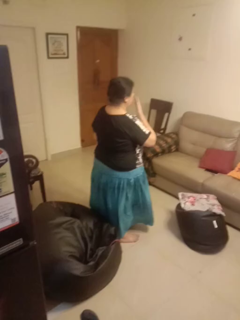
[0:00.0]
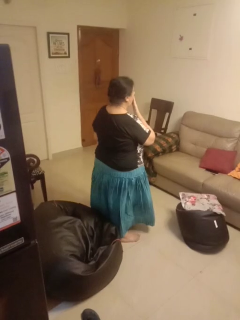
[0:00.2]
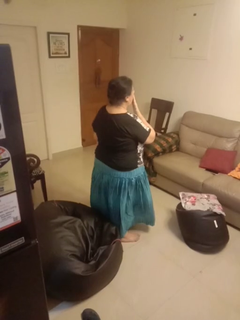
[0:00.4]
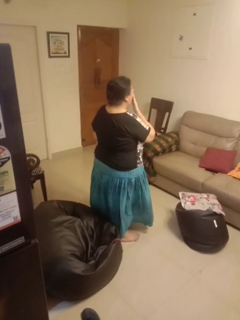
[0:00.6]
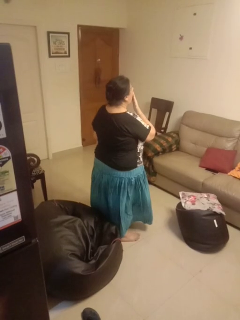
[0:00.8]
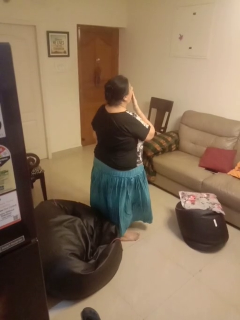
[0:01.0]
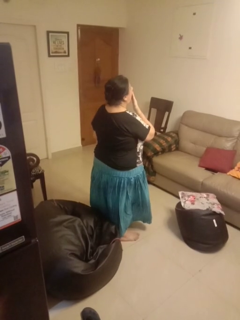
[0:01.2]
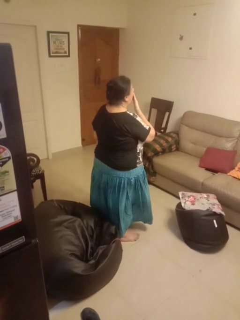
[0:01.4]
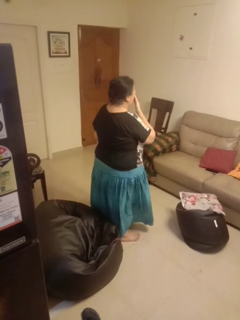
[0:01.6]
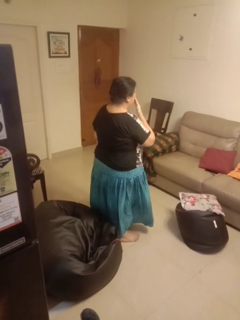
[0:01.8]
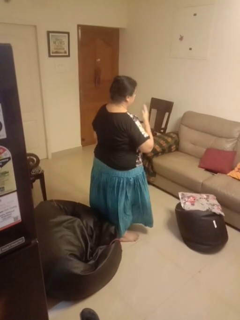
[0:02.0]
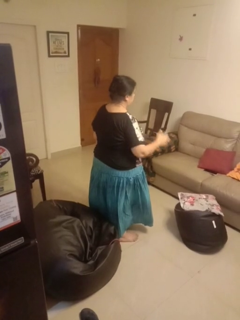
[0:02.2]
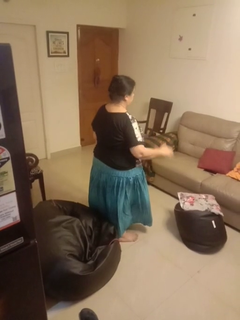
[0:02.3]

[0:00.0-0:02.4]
person yawns

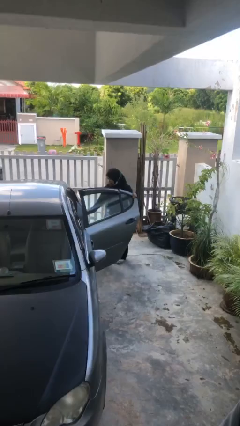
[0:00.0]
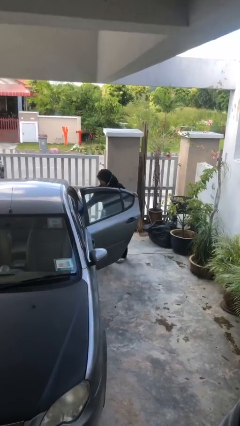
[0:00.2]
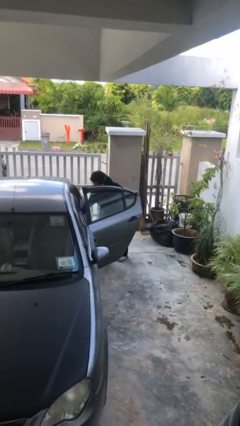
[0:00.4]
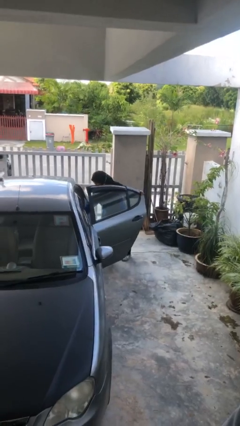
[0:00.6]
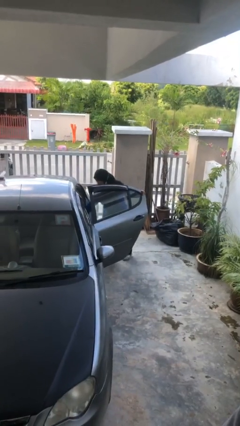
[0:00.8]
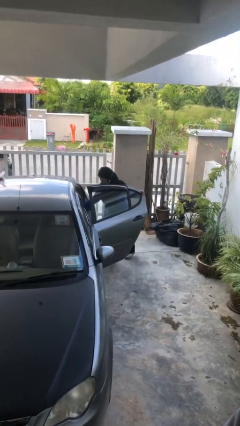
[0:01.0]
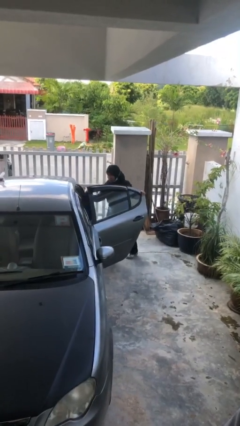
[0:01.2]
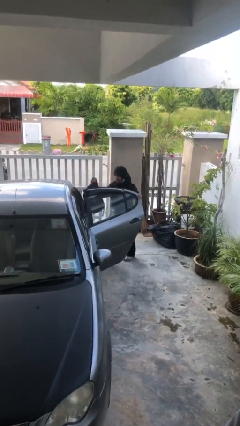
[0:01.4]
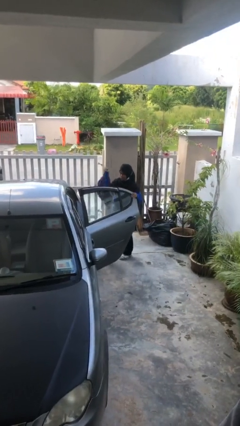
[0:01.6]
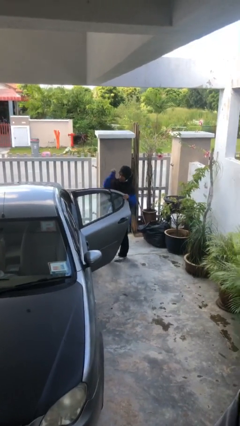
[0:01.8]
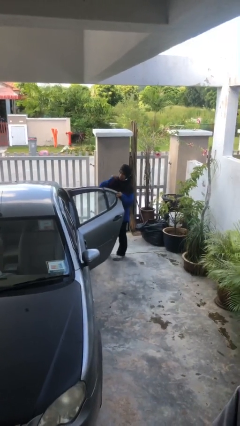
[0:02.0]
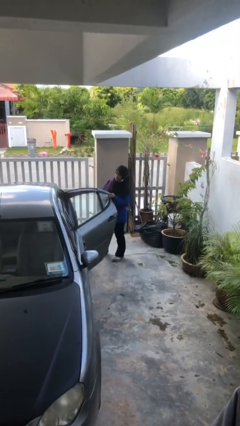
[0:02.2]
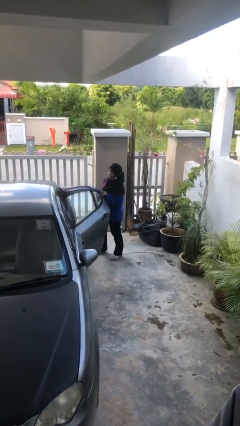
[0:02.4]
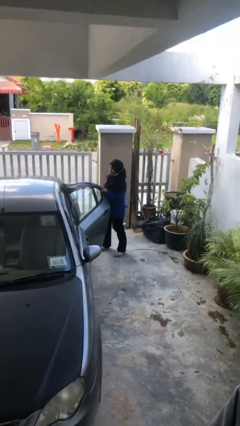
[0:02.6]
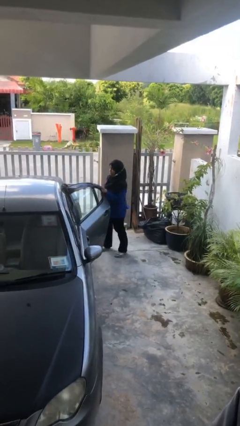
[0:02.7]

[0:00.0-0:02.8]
person unloads car

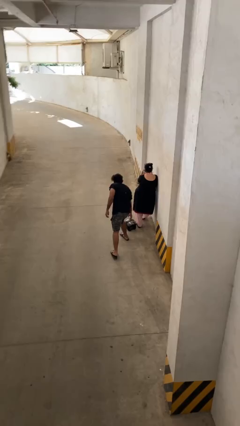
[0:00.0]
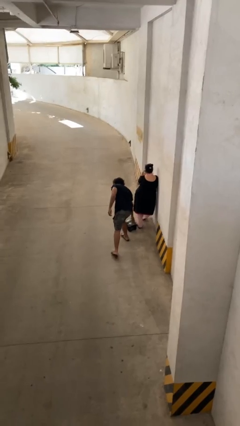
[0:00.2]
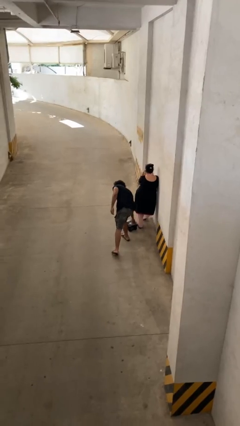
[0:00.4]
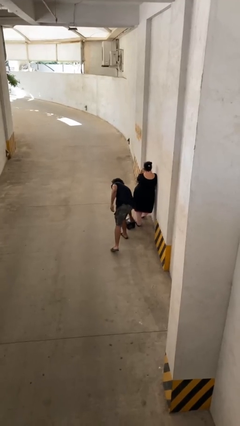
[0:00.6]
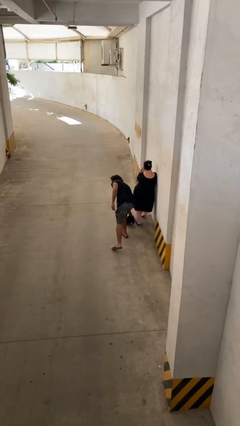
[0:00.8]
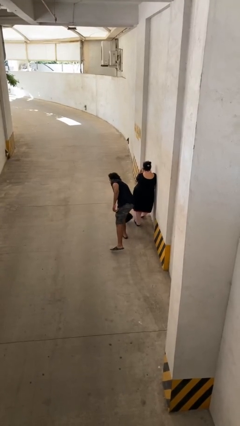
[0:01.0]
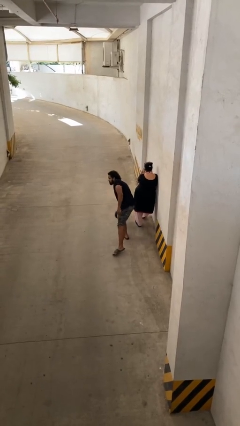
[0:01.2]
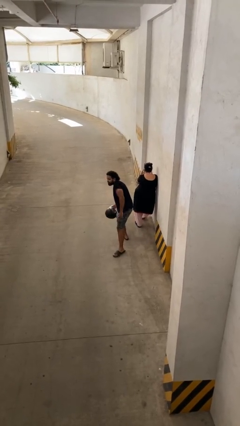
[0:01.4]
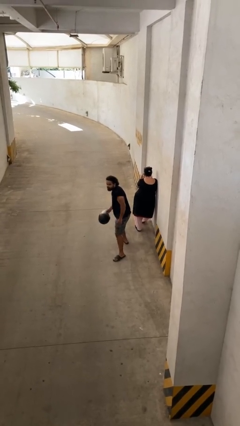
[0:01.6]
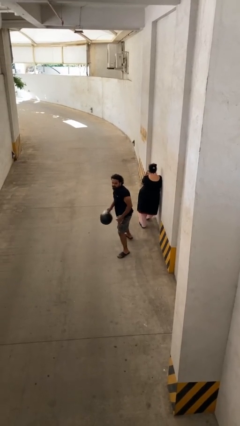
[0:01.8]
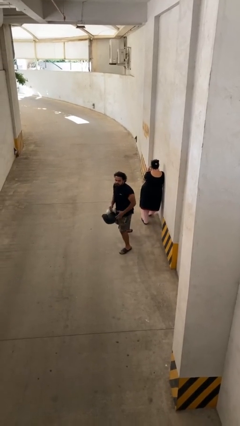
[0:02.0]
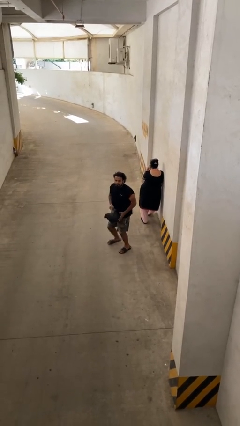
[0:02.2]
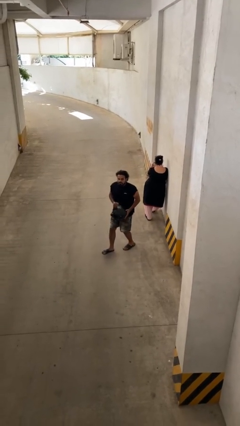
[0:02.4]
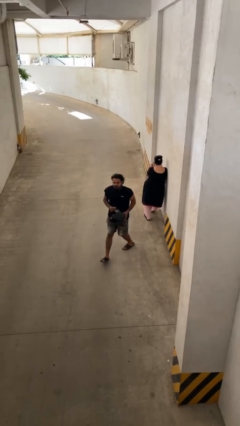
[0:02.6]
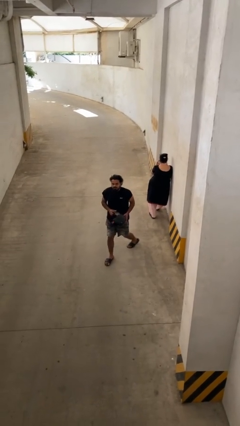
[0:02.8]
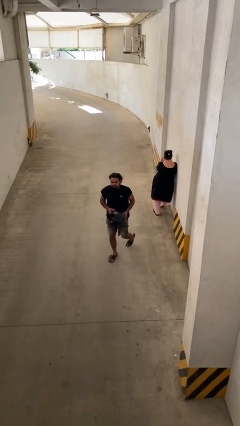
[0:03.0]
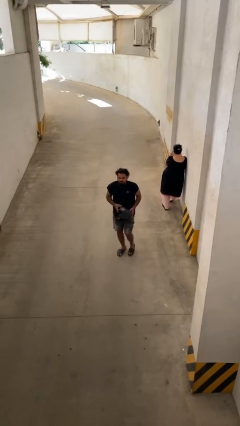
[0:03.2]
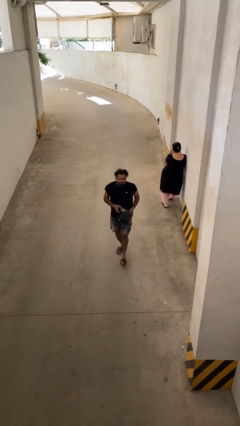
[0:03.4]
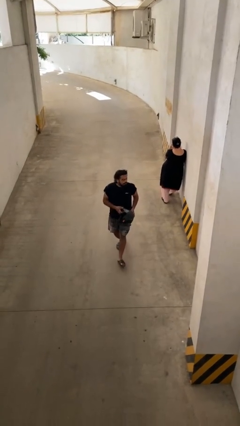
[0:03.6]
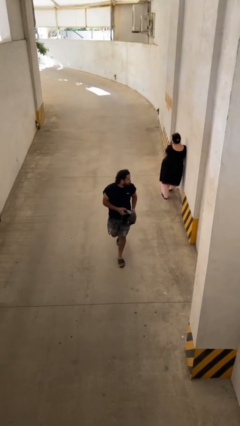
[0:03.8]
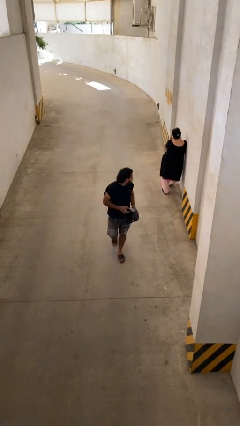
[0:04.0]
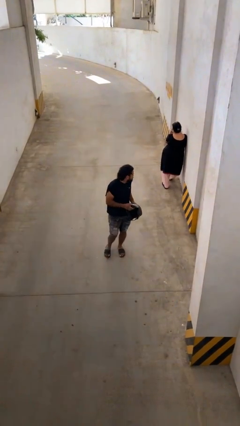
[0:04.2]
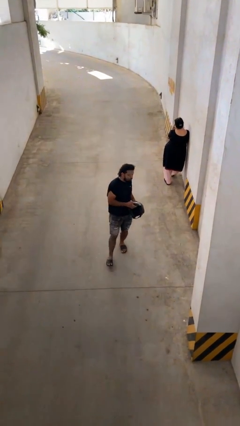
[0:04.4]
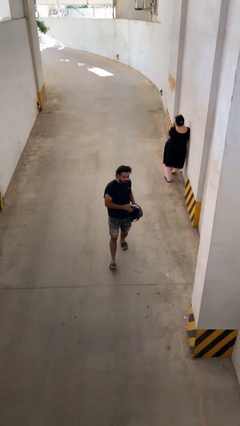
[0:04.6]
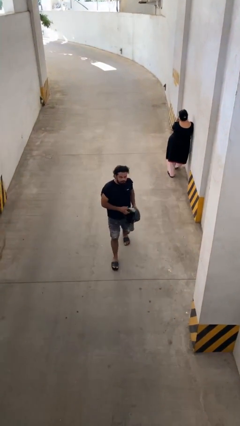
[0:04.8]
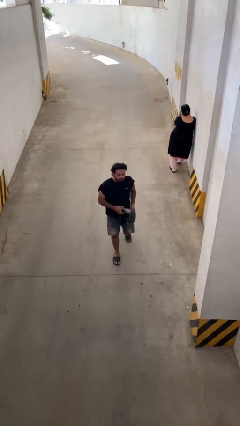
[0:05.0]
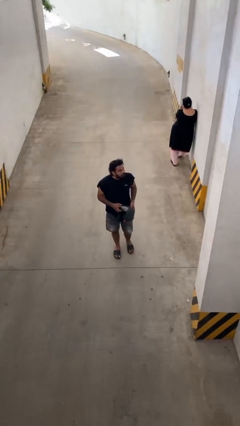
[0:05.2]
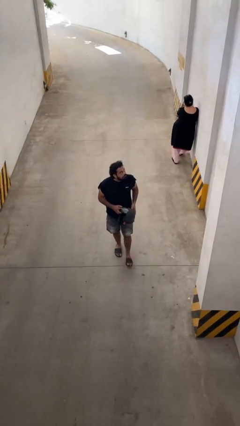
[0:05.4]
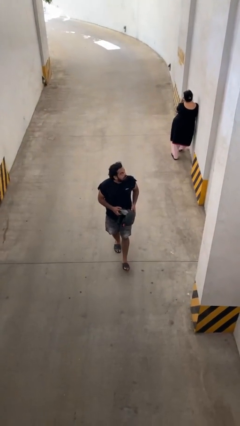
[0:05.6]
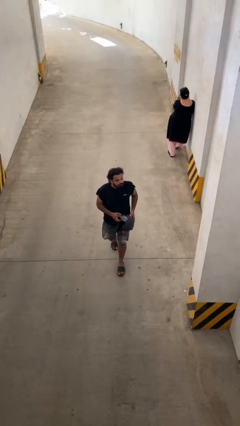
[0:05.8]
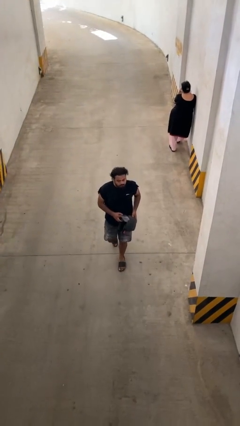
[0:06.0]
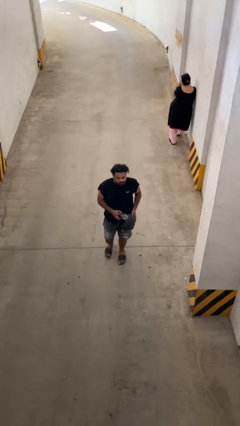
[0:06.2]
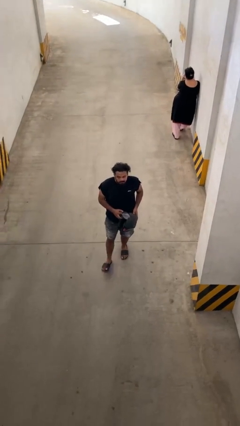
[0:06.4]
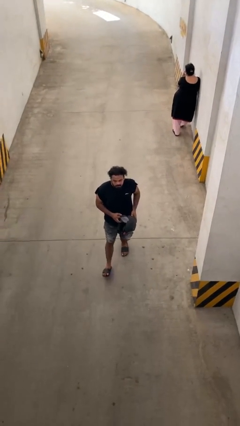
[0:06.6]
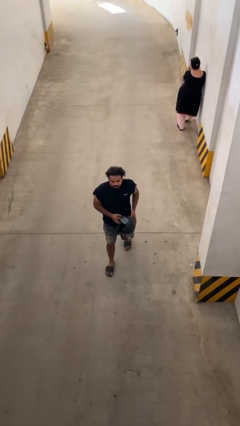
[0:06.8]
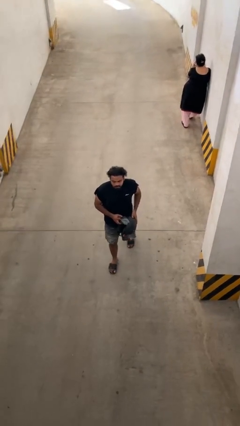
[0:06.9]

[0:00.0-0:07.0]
person steals object from person

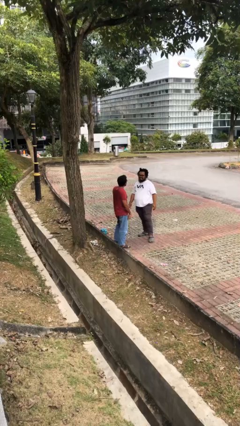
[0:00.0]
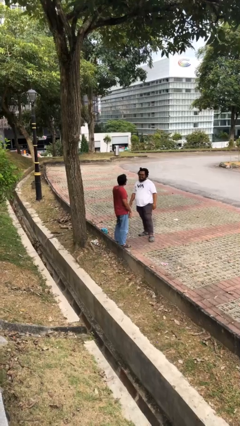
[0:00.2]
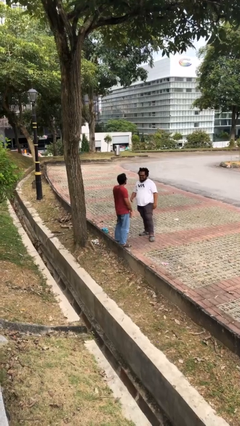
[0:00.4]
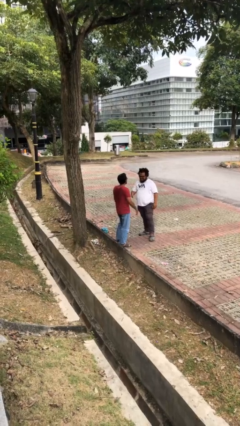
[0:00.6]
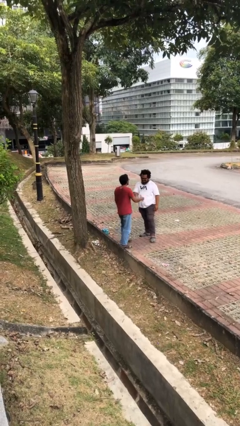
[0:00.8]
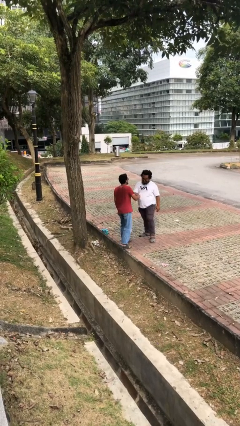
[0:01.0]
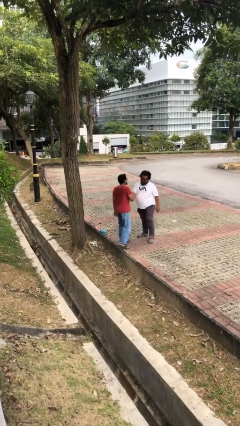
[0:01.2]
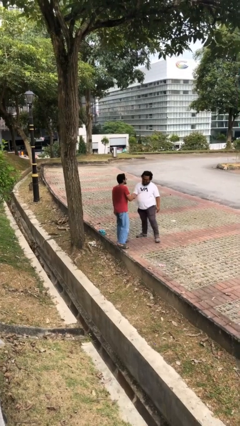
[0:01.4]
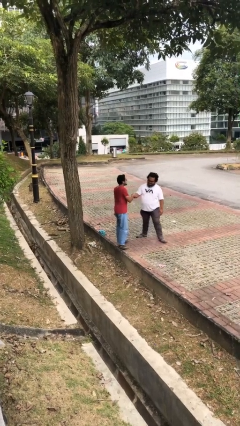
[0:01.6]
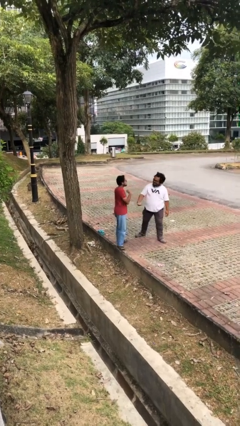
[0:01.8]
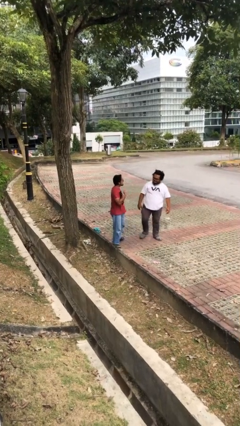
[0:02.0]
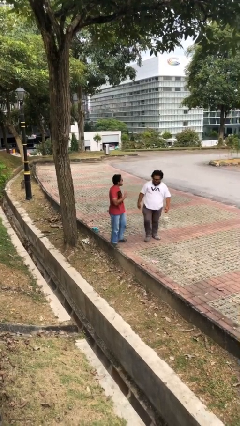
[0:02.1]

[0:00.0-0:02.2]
person shakes hand

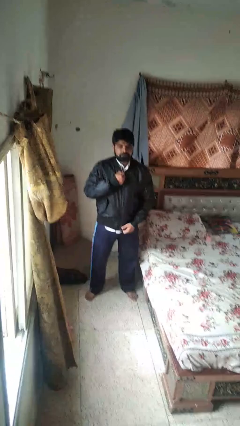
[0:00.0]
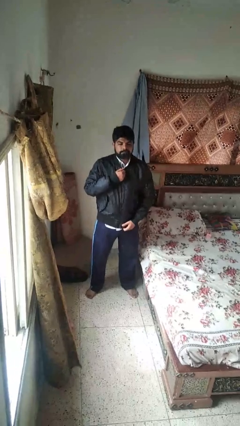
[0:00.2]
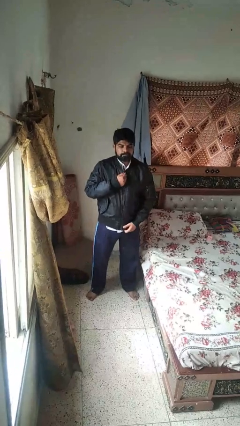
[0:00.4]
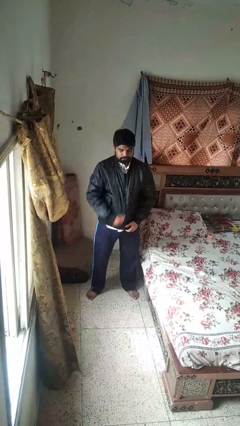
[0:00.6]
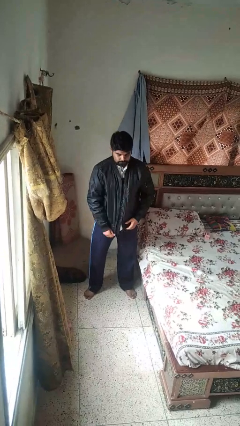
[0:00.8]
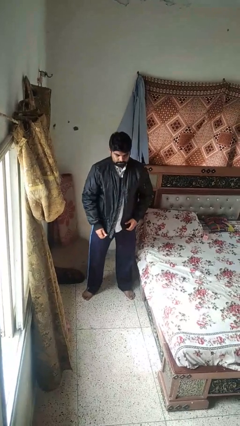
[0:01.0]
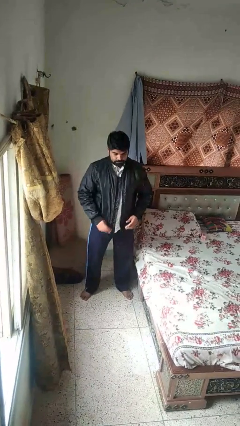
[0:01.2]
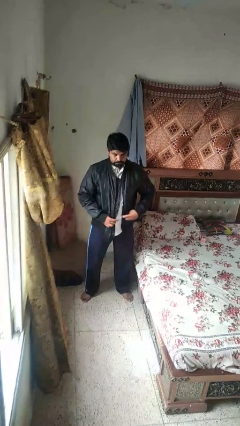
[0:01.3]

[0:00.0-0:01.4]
person unzips jacket

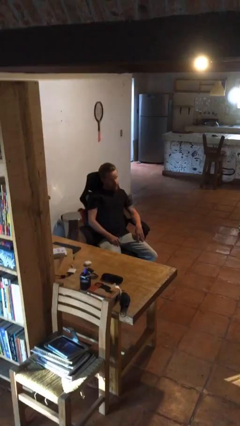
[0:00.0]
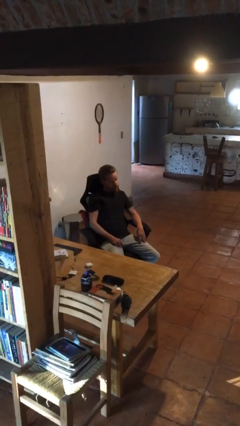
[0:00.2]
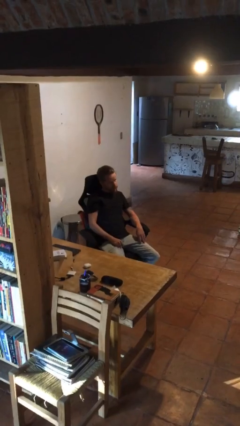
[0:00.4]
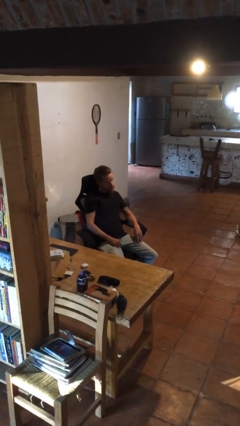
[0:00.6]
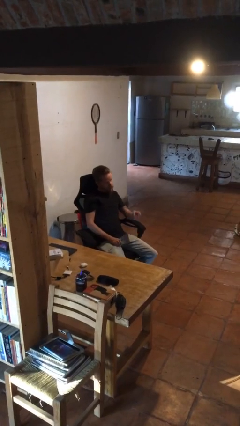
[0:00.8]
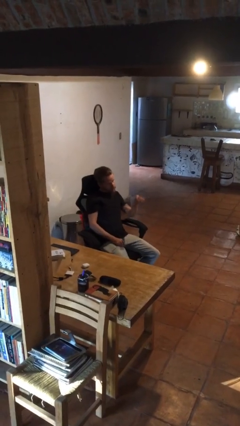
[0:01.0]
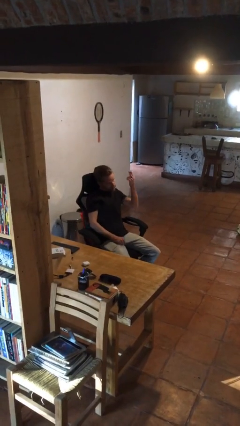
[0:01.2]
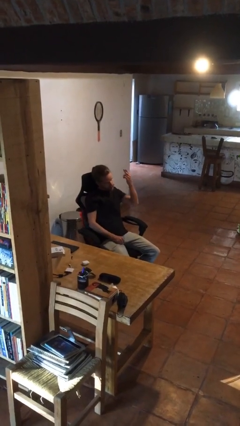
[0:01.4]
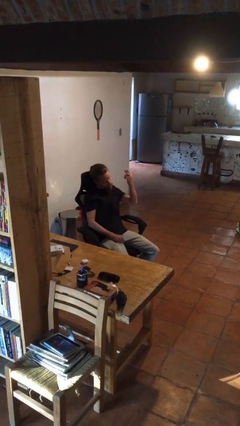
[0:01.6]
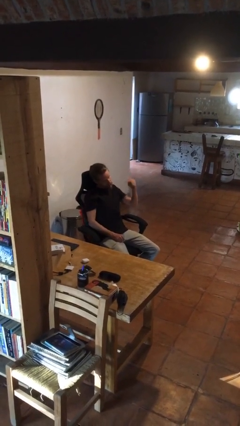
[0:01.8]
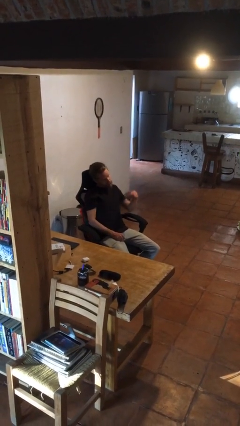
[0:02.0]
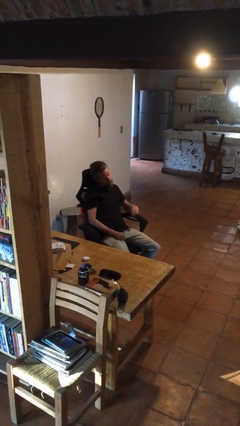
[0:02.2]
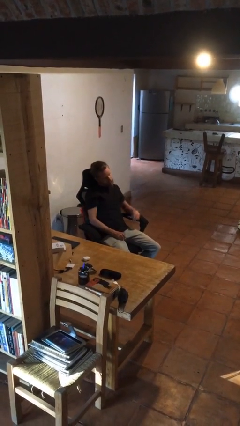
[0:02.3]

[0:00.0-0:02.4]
person gestures swipe up
